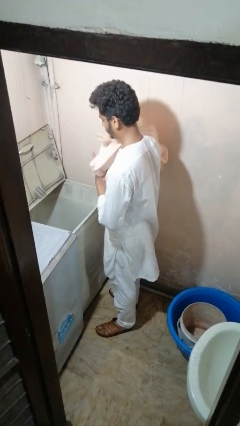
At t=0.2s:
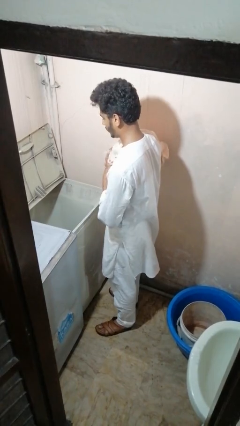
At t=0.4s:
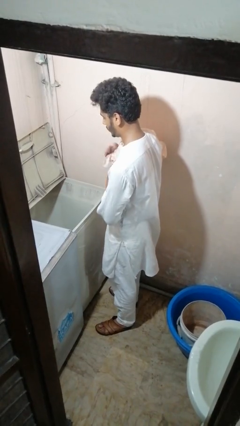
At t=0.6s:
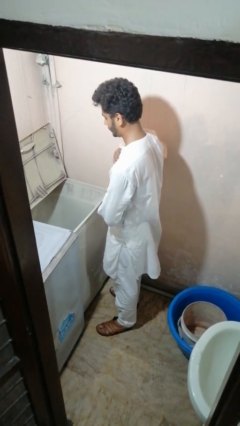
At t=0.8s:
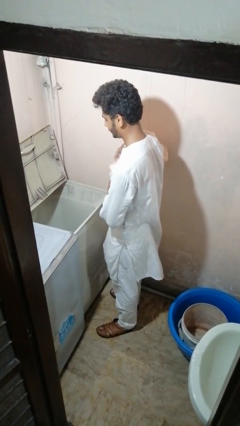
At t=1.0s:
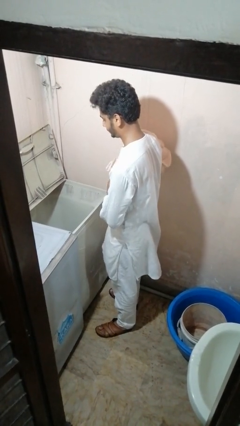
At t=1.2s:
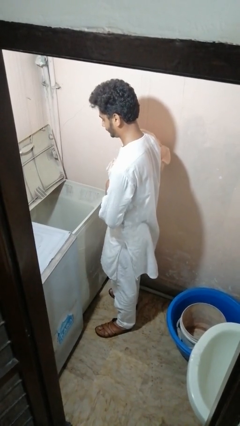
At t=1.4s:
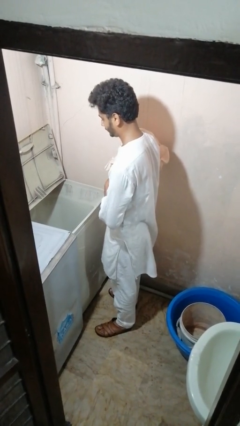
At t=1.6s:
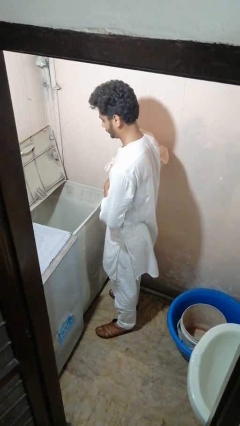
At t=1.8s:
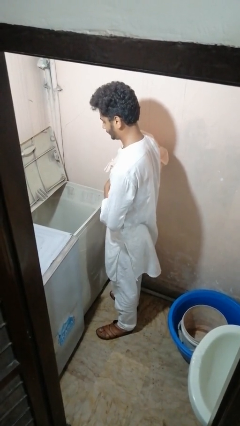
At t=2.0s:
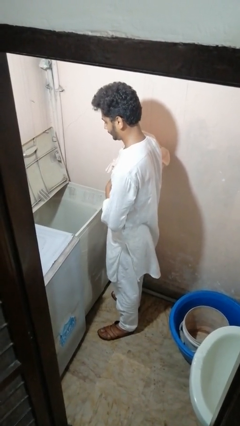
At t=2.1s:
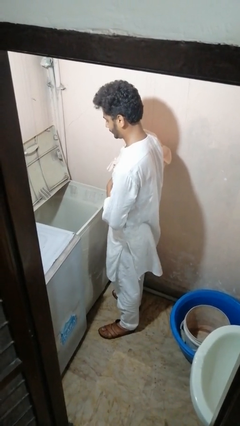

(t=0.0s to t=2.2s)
person unloads clotheswasher

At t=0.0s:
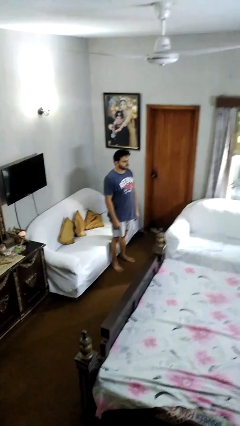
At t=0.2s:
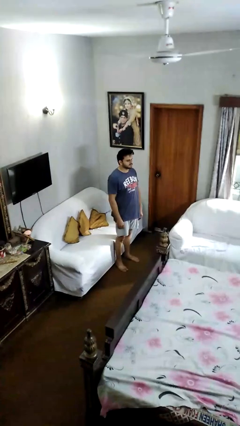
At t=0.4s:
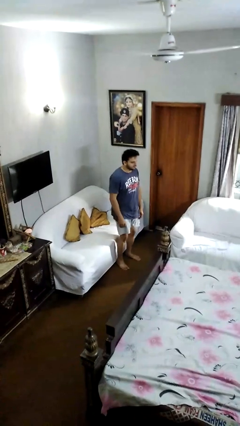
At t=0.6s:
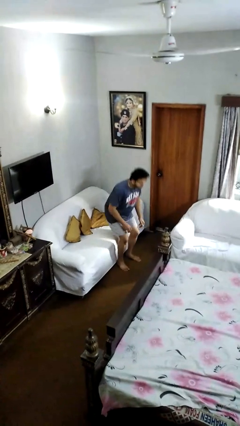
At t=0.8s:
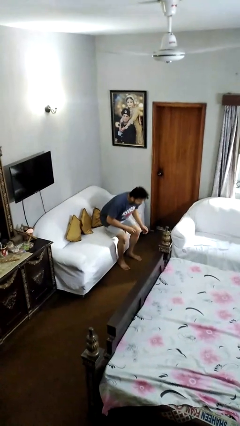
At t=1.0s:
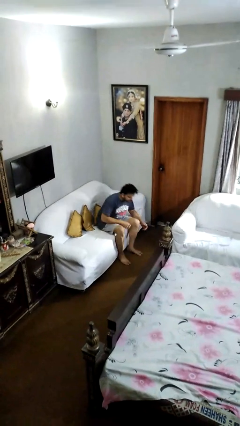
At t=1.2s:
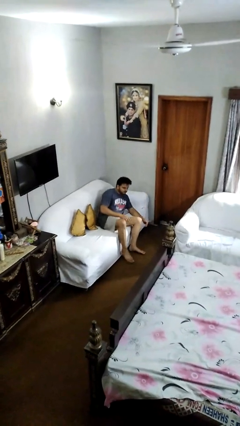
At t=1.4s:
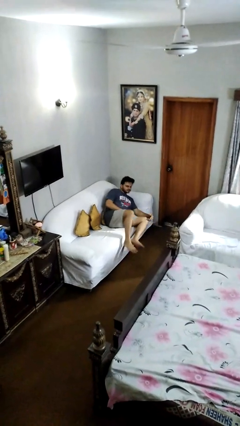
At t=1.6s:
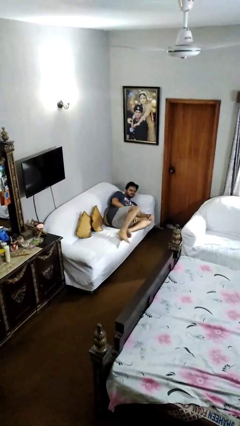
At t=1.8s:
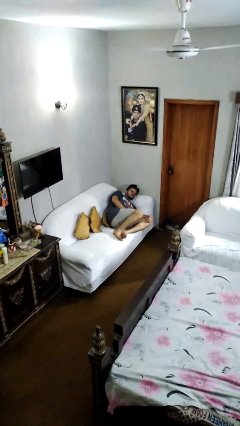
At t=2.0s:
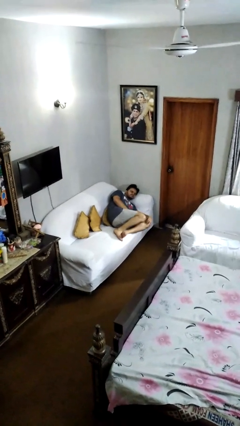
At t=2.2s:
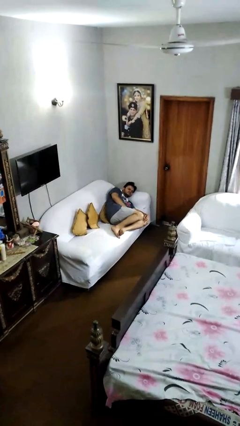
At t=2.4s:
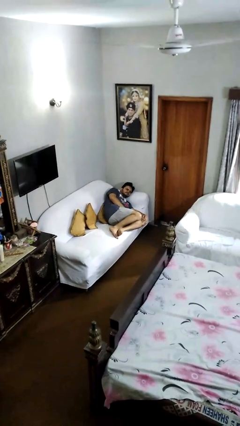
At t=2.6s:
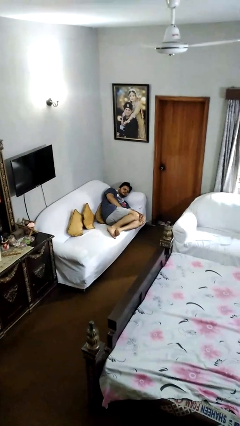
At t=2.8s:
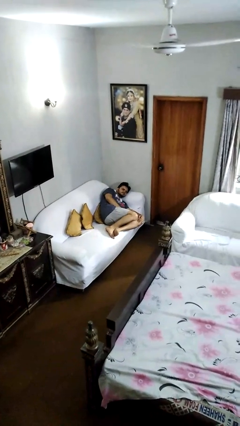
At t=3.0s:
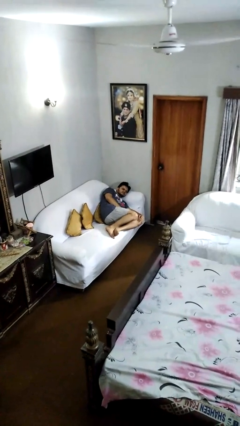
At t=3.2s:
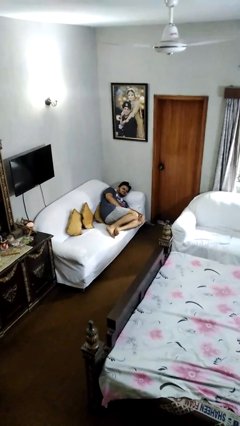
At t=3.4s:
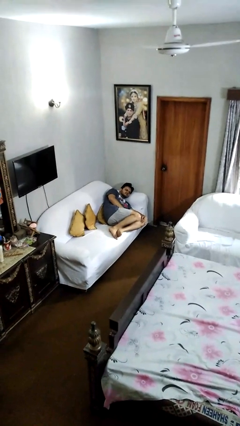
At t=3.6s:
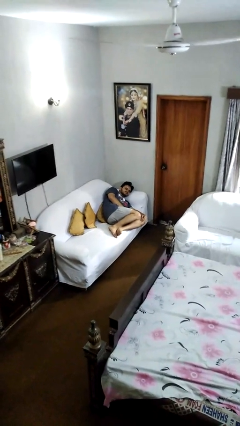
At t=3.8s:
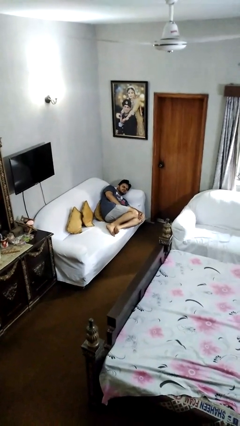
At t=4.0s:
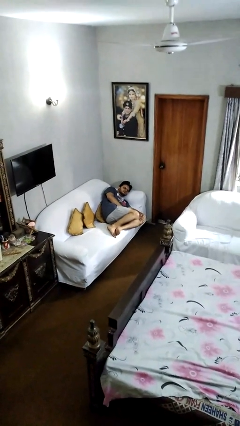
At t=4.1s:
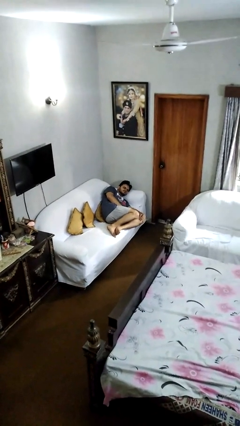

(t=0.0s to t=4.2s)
person lies down on couch

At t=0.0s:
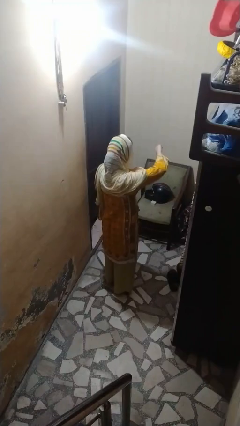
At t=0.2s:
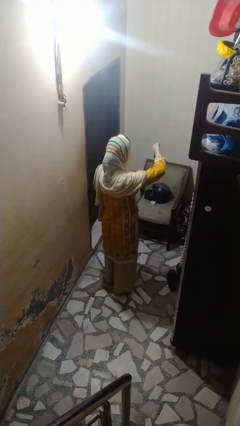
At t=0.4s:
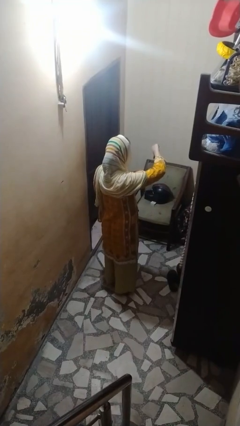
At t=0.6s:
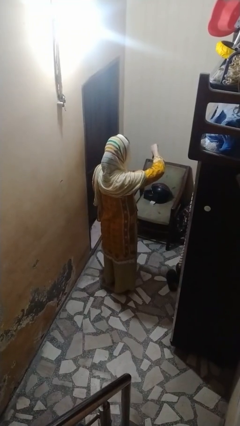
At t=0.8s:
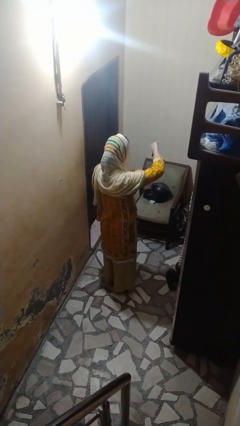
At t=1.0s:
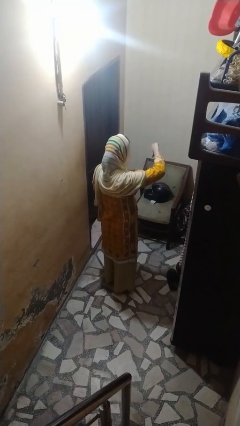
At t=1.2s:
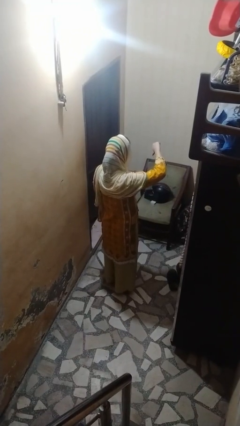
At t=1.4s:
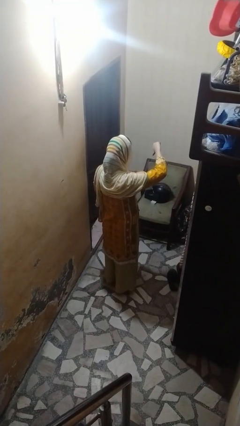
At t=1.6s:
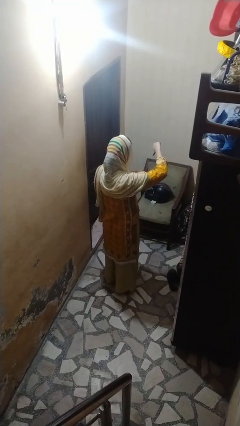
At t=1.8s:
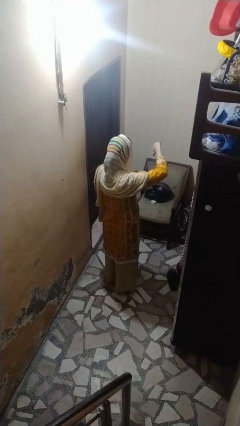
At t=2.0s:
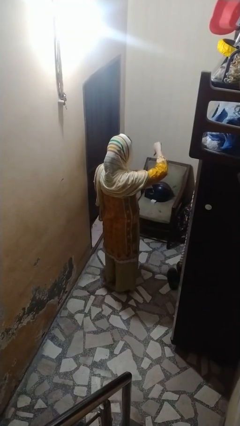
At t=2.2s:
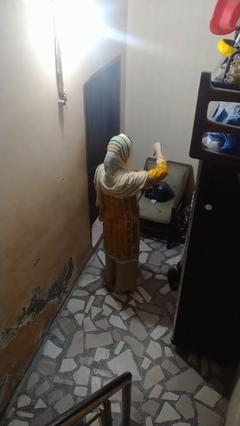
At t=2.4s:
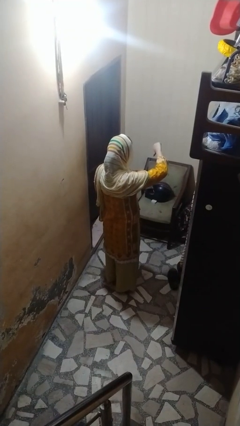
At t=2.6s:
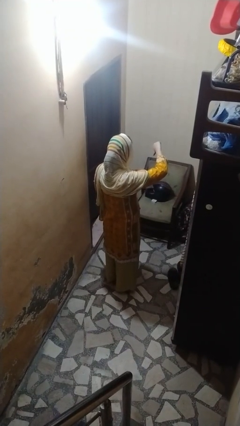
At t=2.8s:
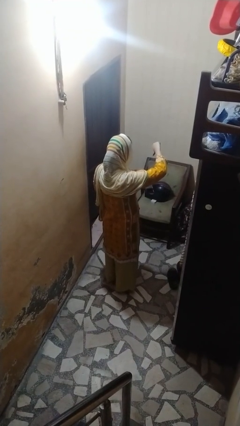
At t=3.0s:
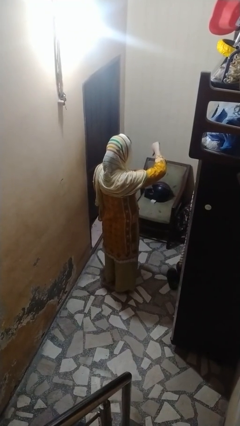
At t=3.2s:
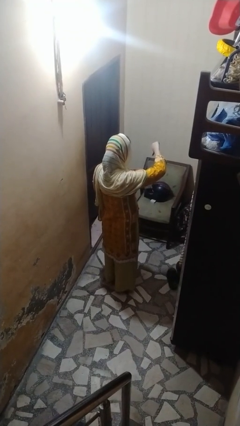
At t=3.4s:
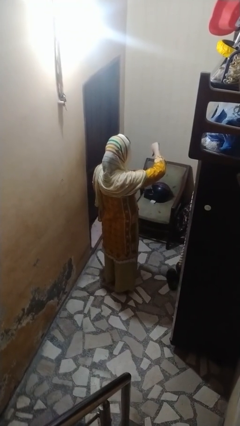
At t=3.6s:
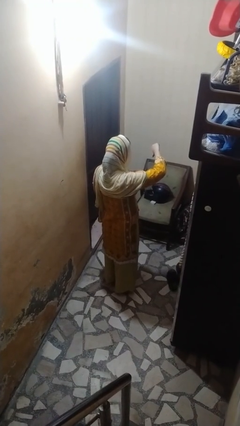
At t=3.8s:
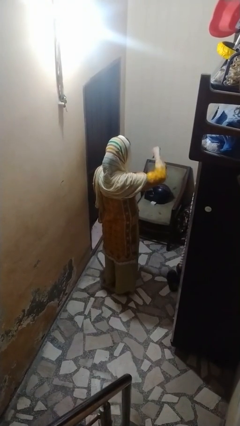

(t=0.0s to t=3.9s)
person gestures thumbs down

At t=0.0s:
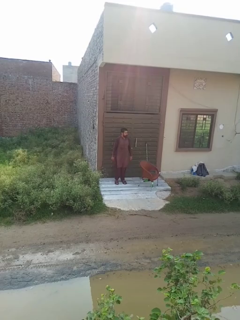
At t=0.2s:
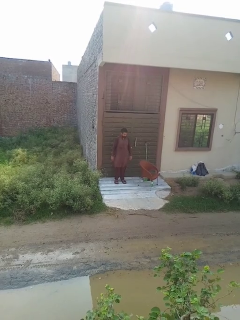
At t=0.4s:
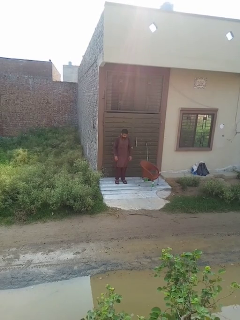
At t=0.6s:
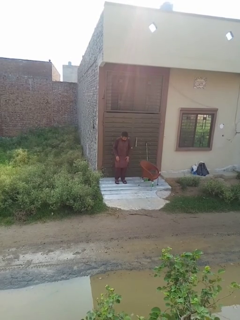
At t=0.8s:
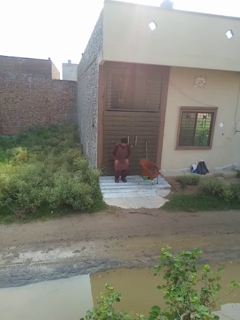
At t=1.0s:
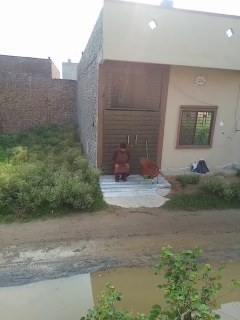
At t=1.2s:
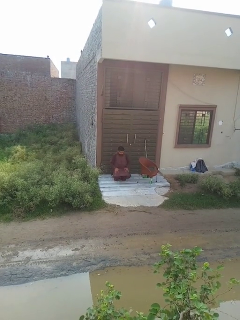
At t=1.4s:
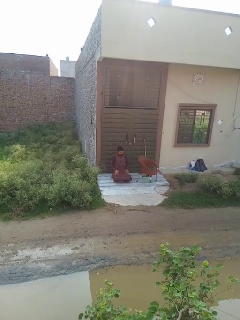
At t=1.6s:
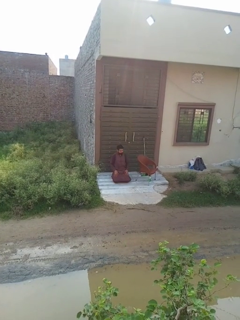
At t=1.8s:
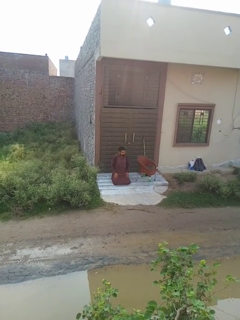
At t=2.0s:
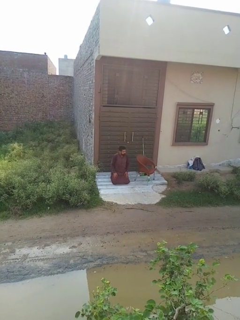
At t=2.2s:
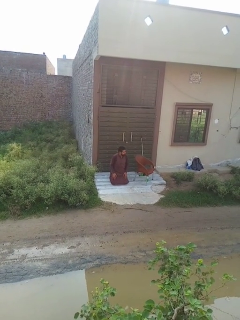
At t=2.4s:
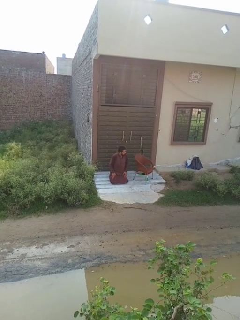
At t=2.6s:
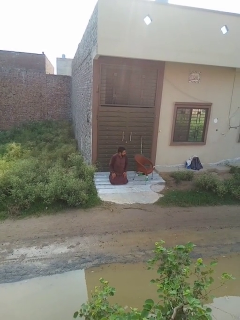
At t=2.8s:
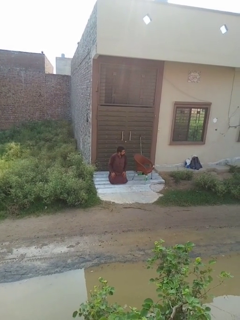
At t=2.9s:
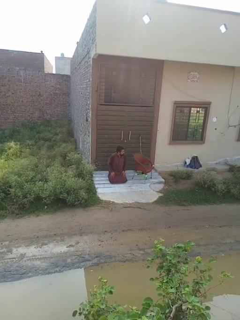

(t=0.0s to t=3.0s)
person kneels

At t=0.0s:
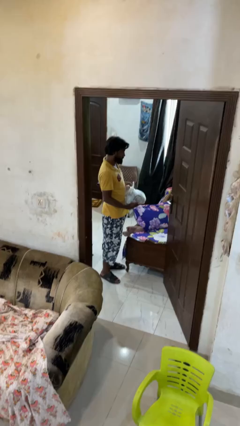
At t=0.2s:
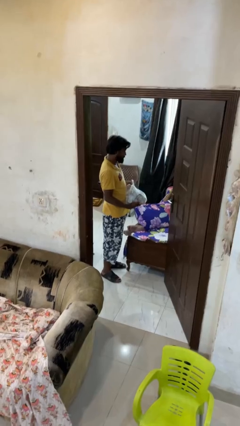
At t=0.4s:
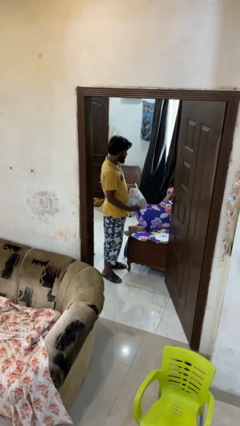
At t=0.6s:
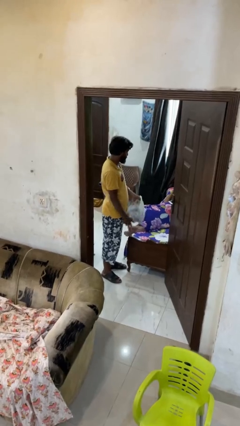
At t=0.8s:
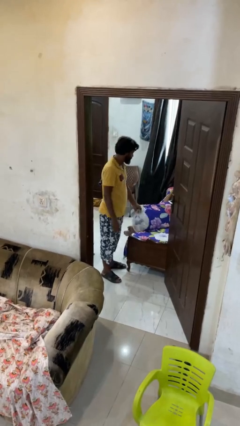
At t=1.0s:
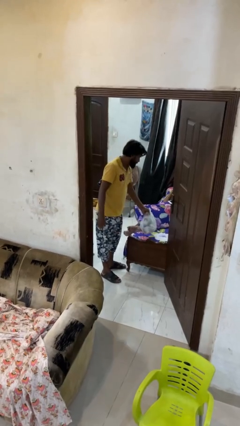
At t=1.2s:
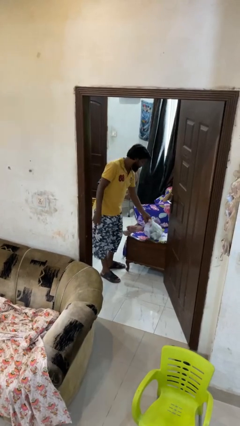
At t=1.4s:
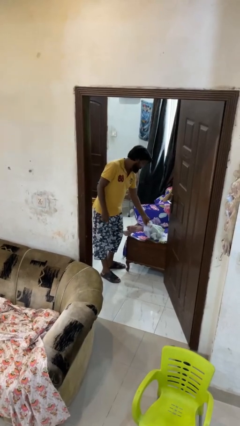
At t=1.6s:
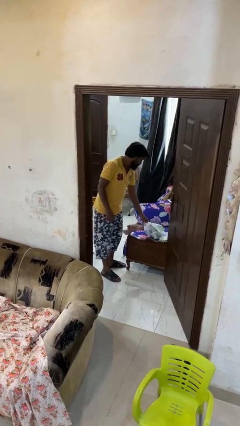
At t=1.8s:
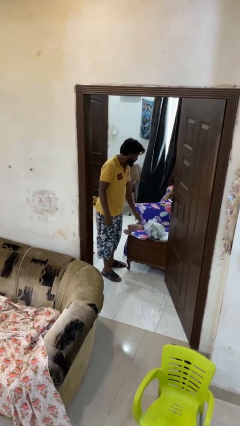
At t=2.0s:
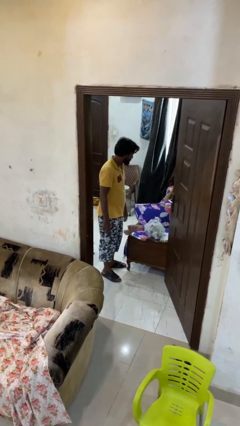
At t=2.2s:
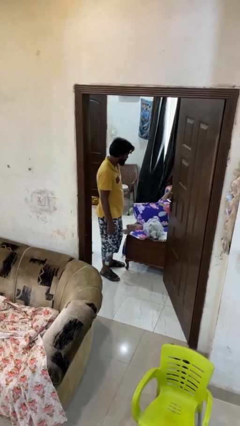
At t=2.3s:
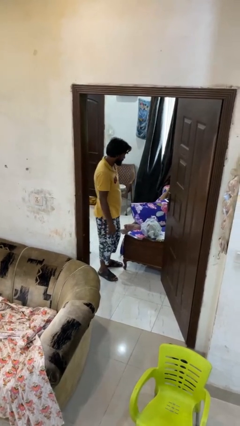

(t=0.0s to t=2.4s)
person puts down object on bed

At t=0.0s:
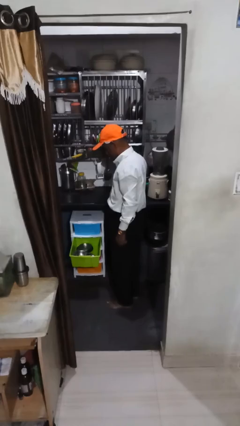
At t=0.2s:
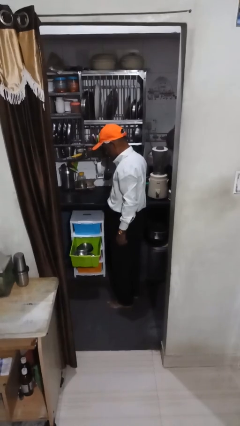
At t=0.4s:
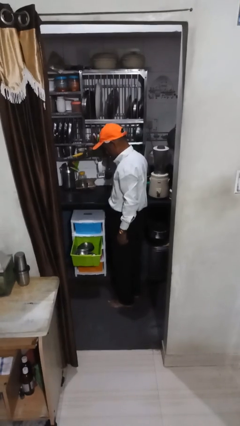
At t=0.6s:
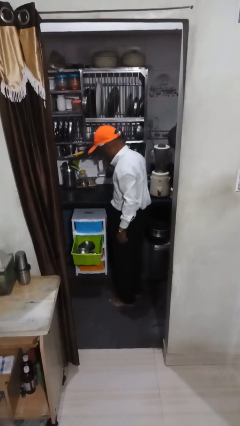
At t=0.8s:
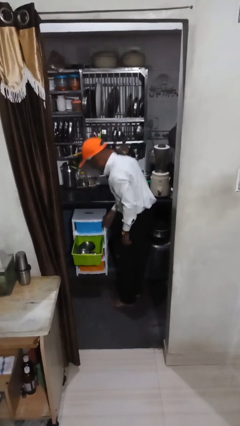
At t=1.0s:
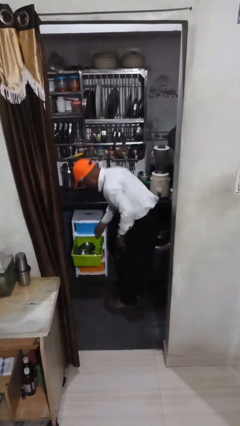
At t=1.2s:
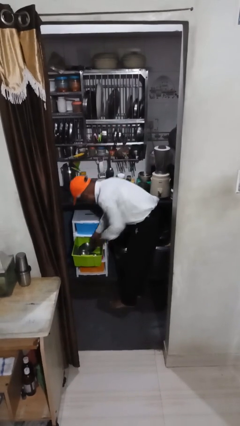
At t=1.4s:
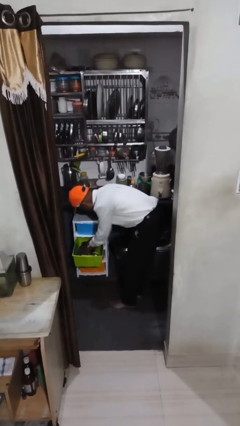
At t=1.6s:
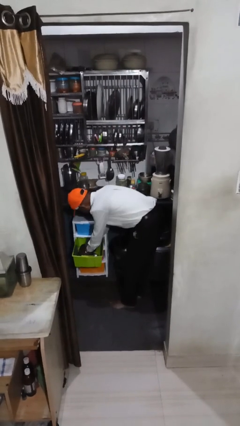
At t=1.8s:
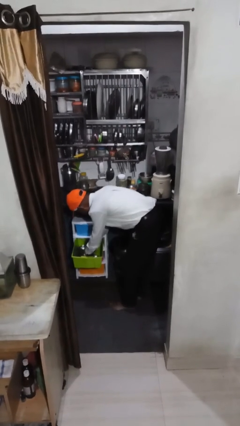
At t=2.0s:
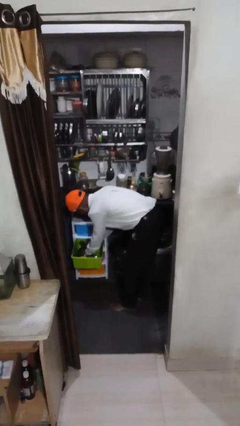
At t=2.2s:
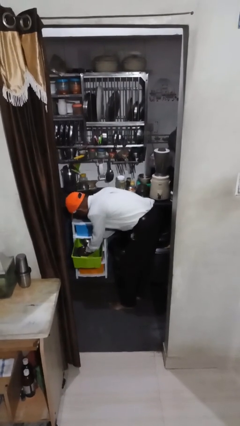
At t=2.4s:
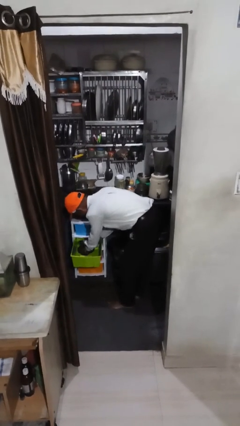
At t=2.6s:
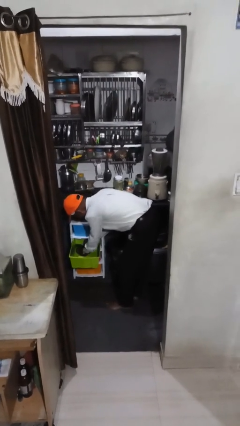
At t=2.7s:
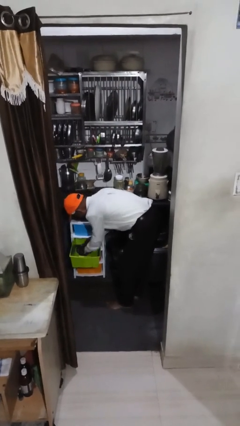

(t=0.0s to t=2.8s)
person searches in kitchen drawer
